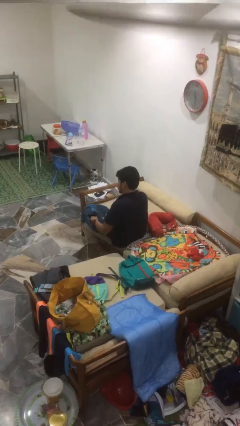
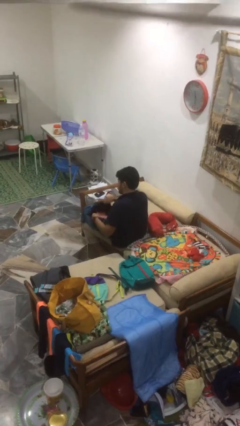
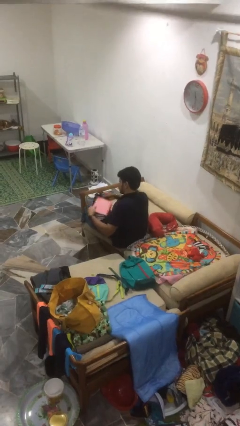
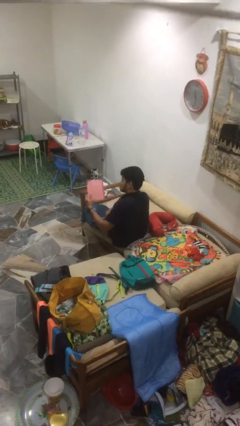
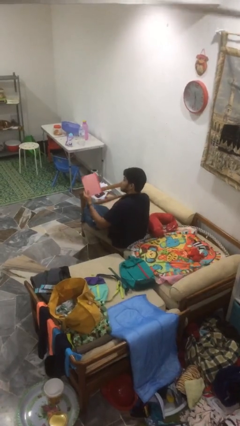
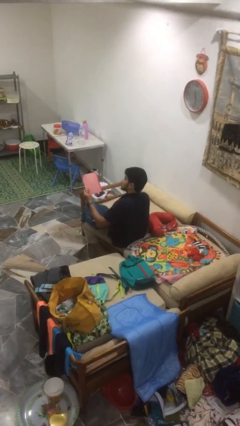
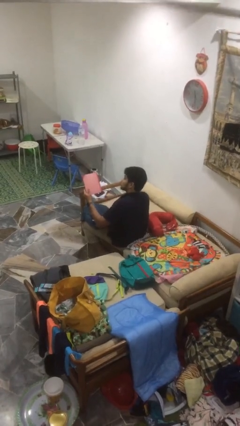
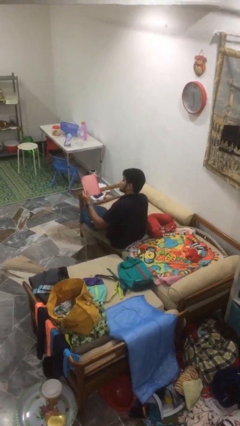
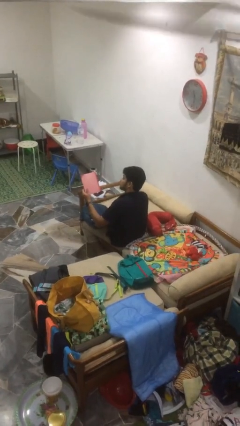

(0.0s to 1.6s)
person takes object from bag

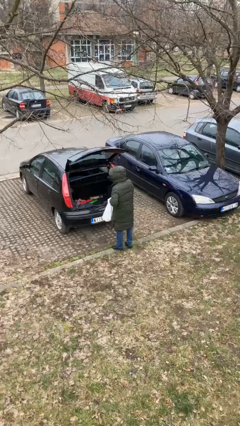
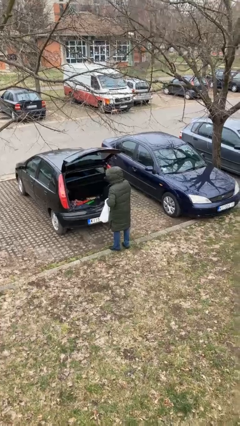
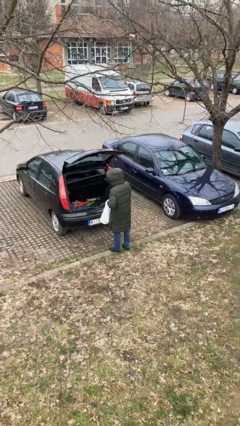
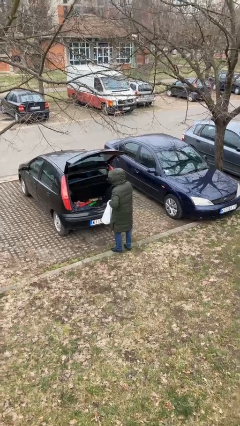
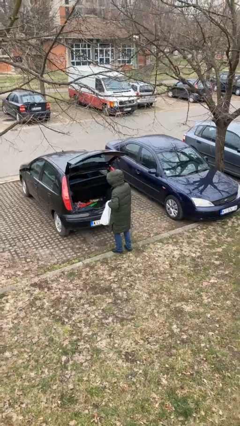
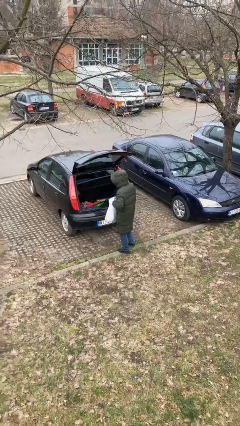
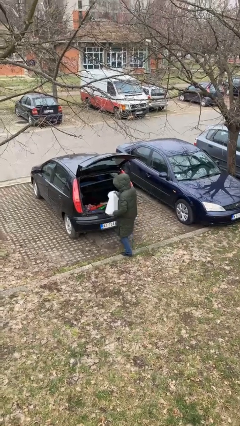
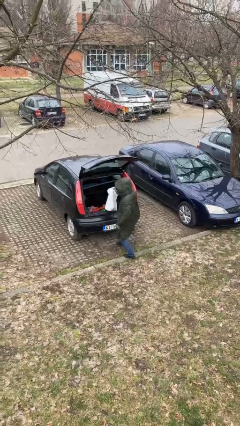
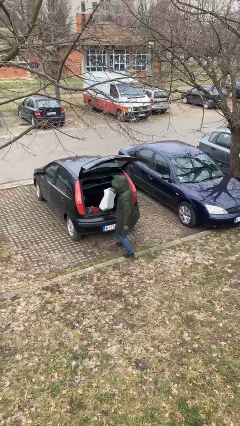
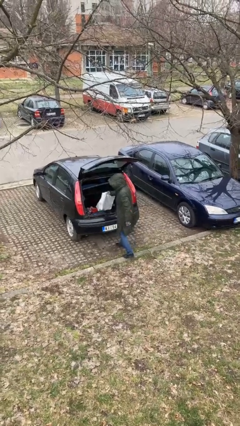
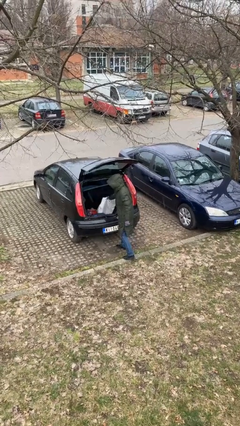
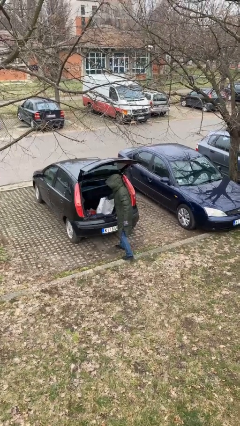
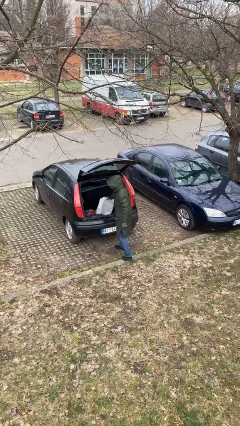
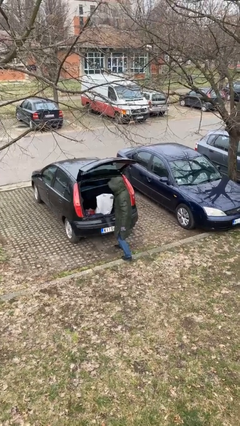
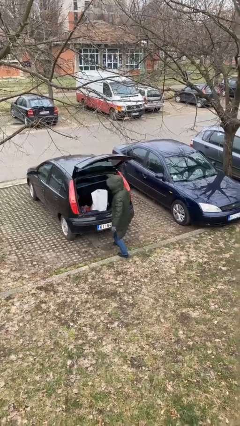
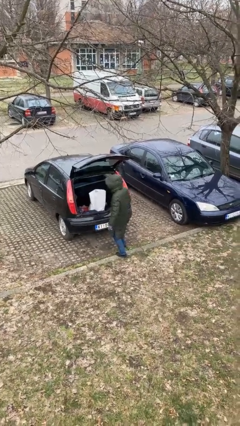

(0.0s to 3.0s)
person loads car

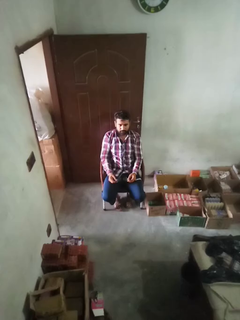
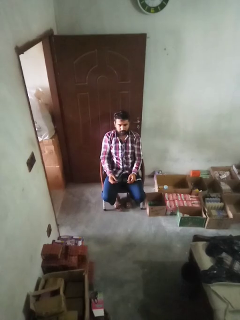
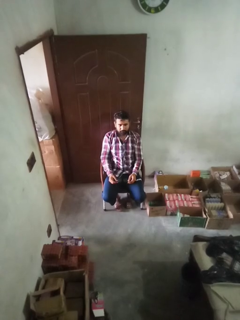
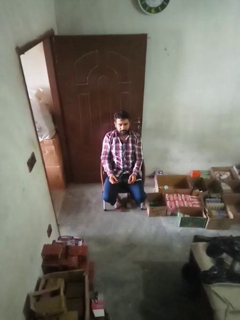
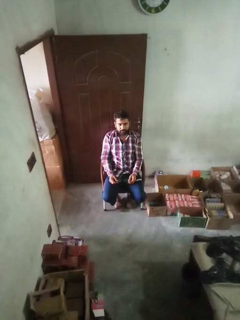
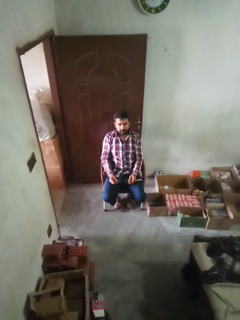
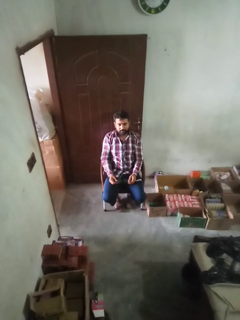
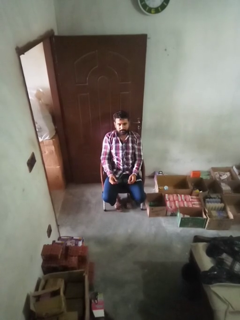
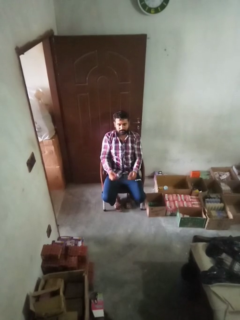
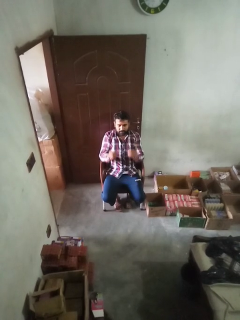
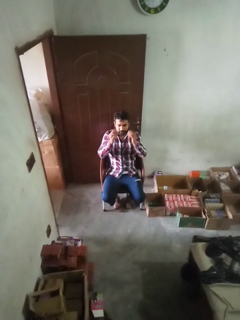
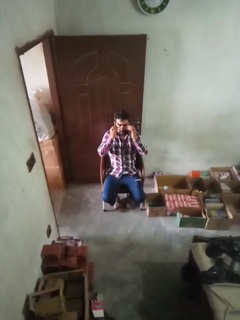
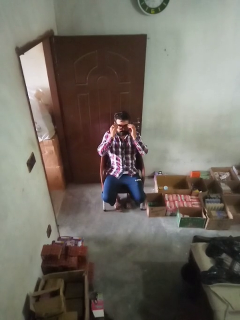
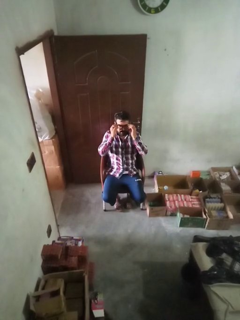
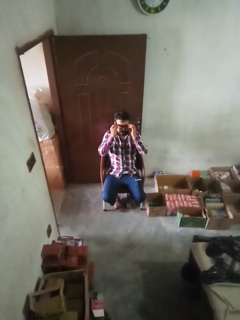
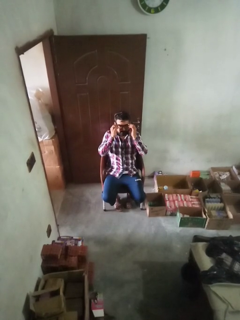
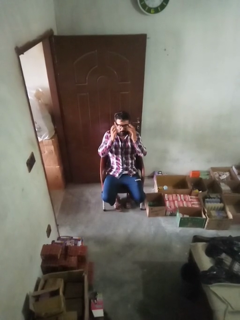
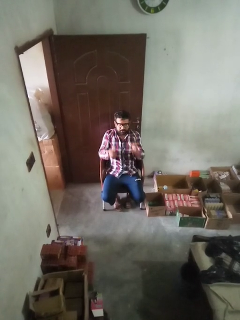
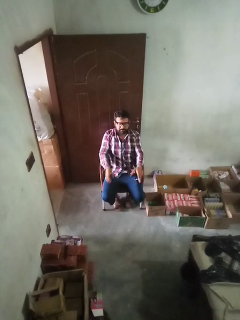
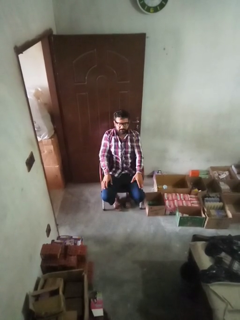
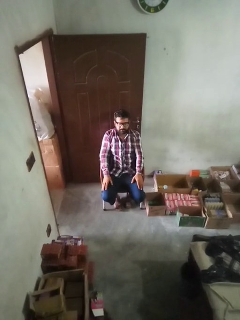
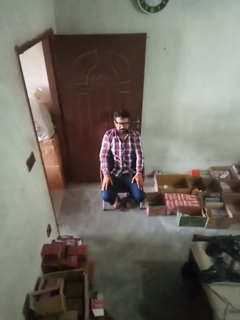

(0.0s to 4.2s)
person puts on glasses

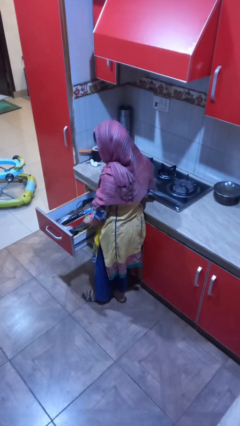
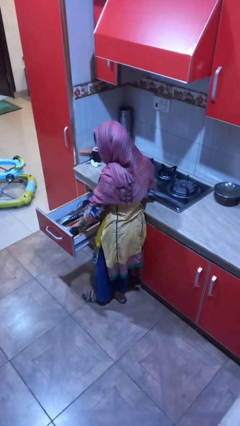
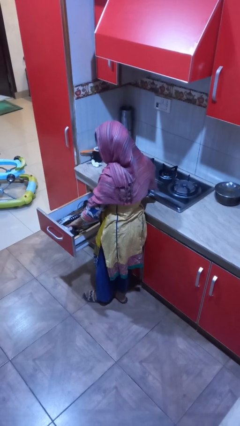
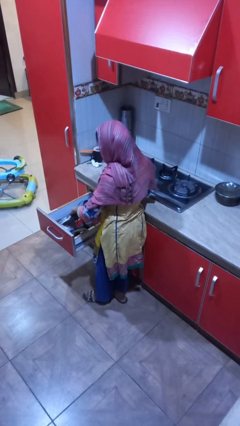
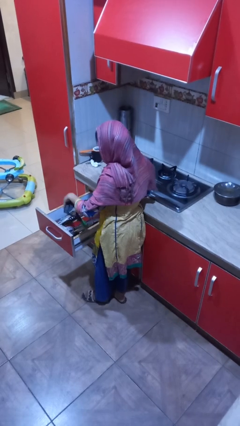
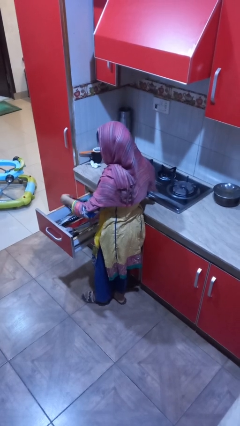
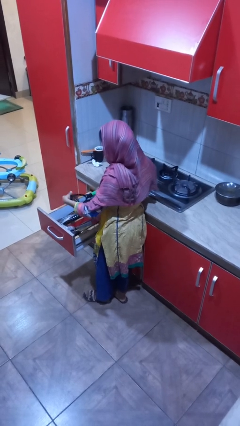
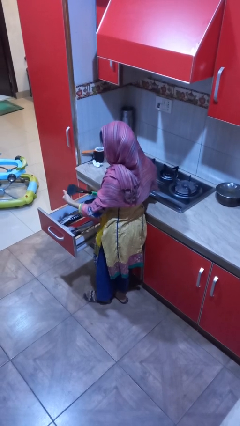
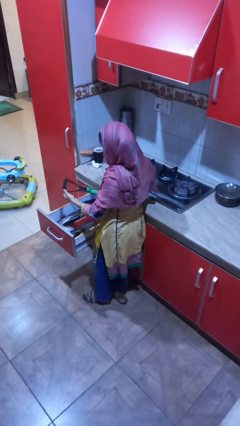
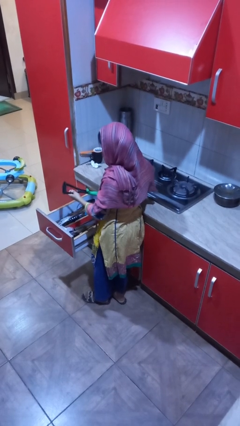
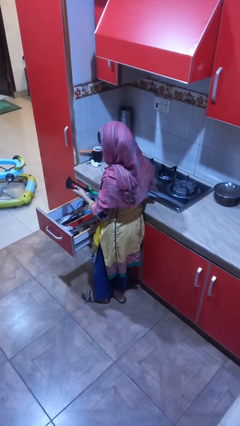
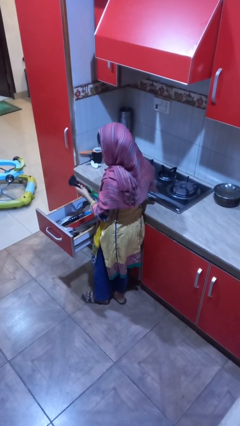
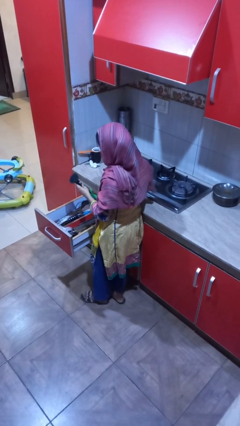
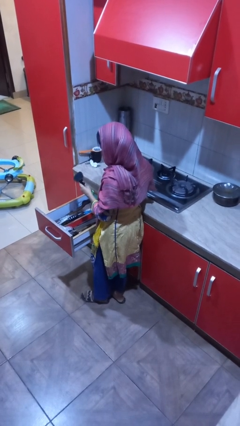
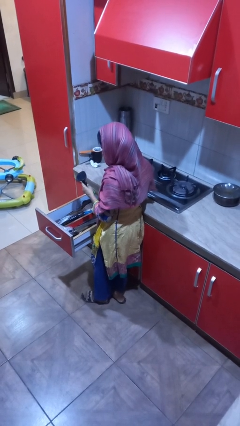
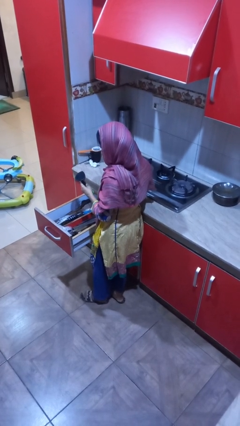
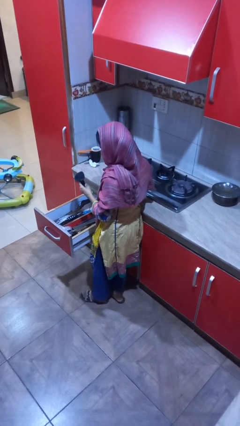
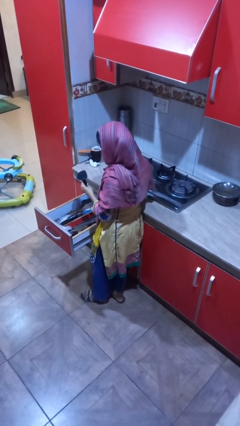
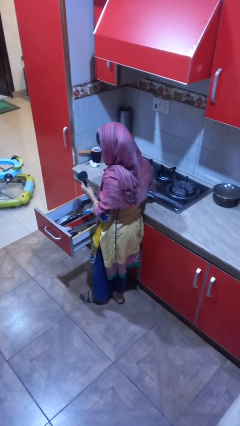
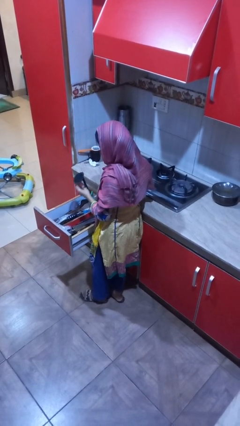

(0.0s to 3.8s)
person takes object from kitchen drawer

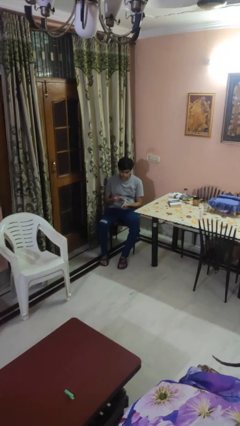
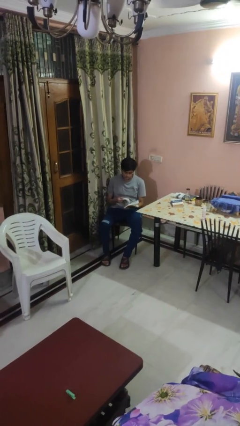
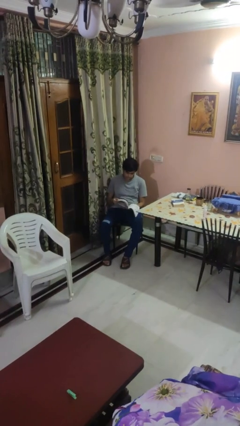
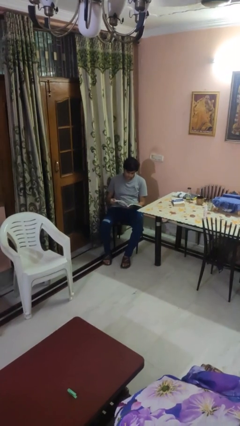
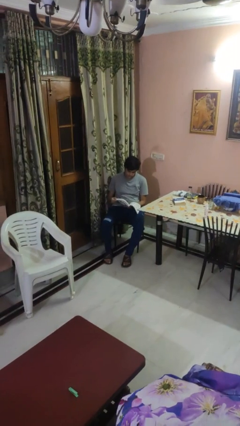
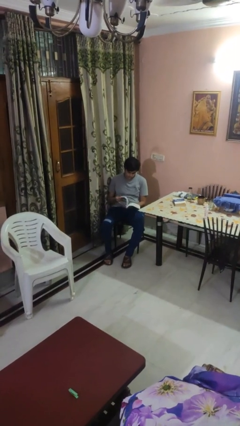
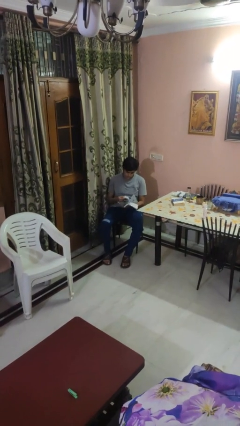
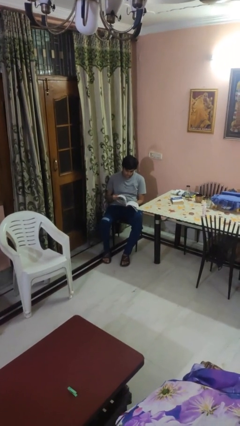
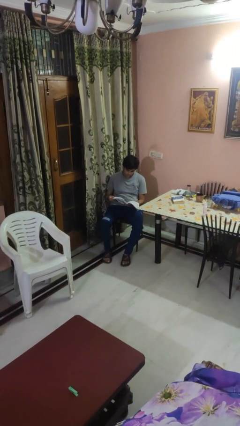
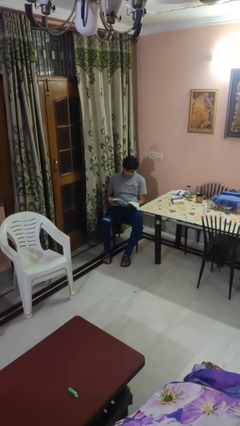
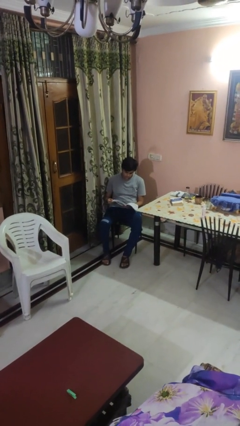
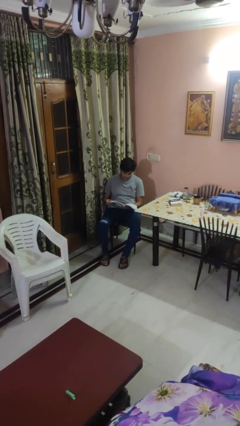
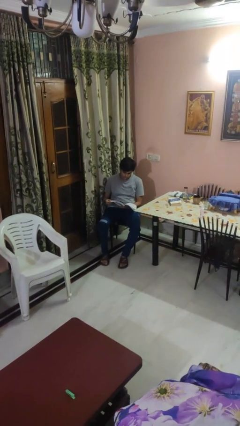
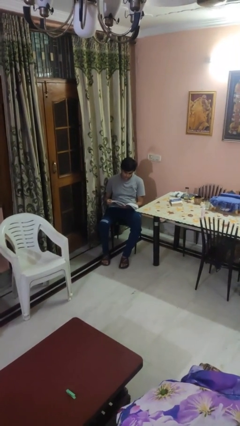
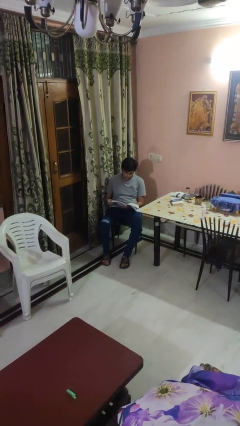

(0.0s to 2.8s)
person reads magazine

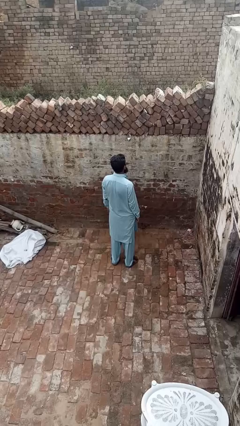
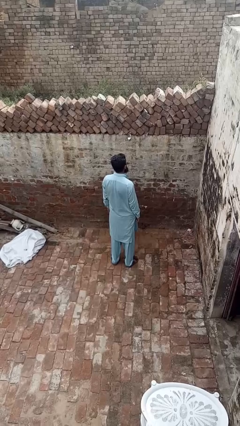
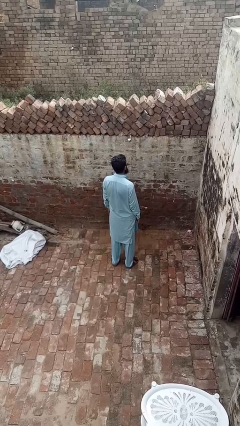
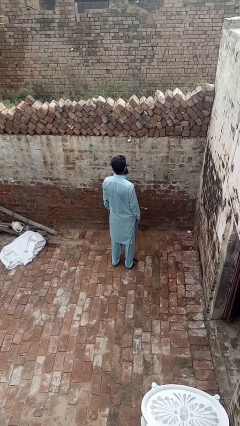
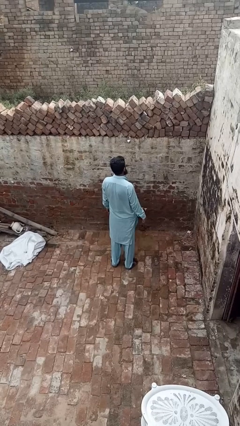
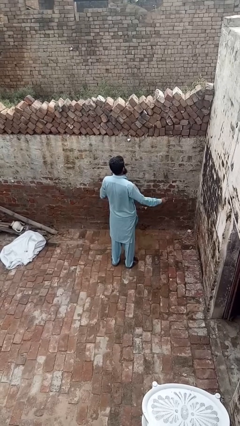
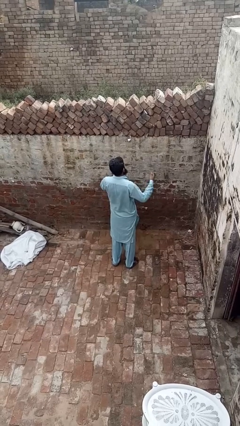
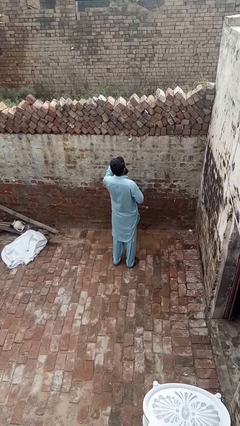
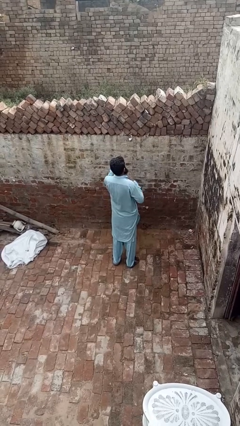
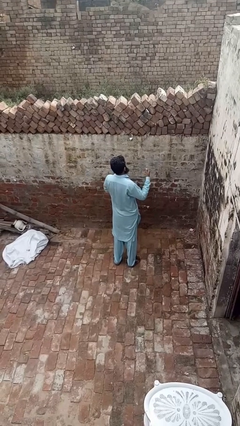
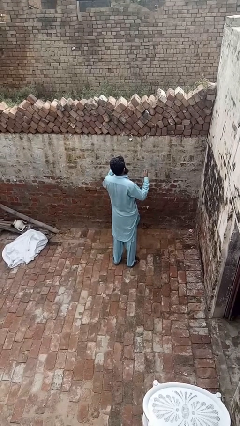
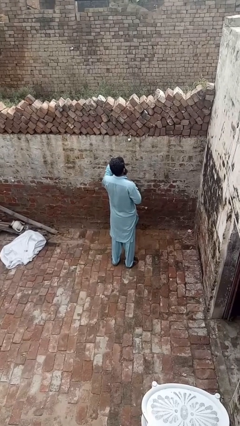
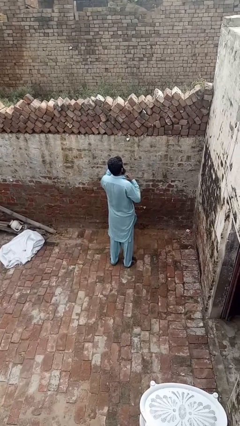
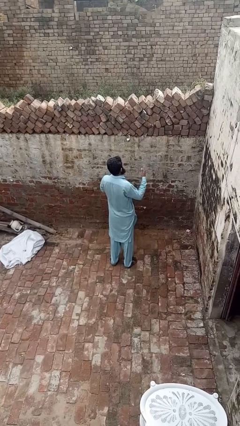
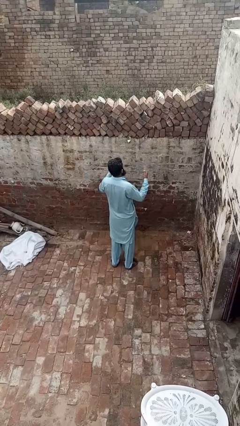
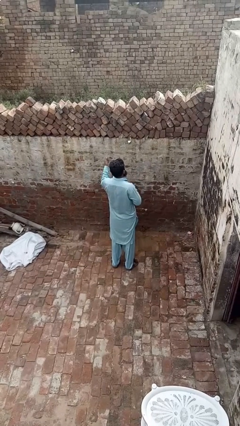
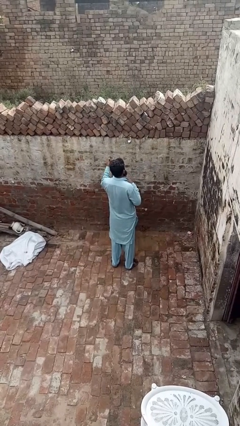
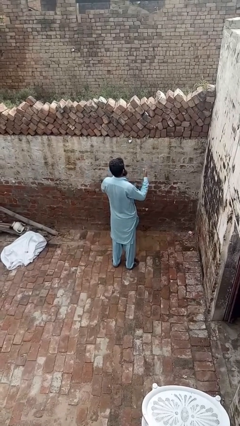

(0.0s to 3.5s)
person drums on chest
